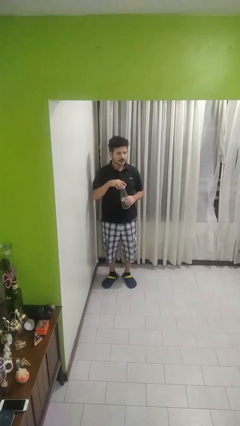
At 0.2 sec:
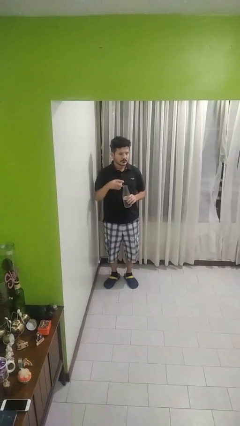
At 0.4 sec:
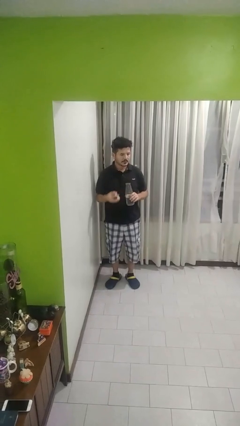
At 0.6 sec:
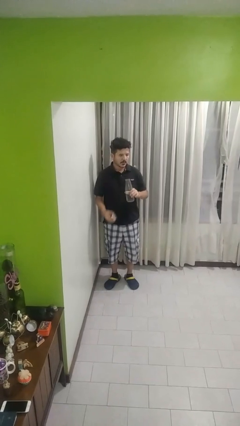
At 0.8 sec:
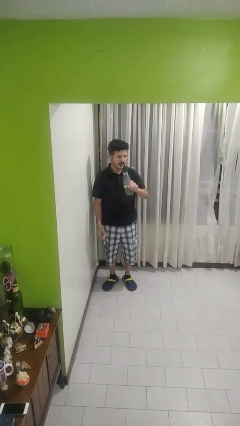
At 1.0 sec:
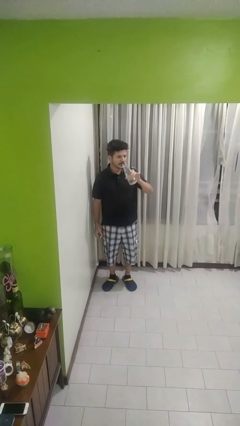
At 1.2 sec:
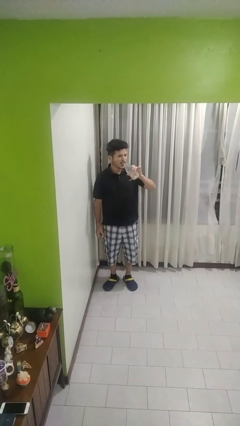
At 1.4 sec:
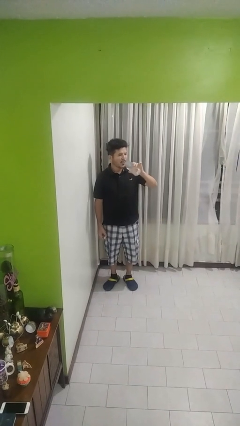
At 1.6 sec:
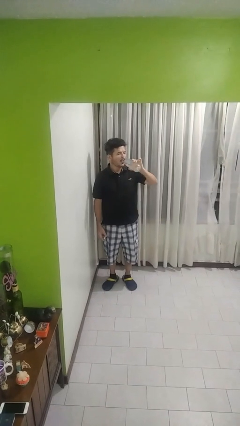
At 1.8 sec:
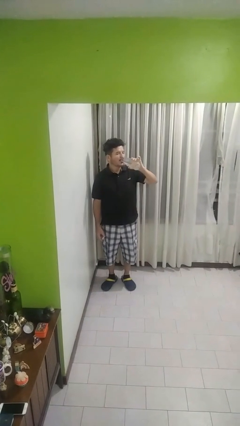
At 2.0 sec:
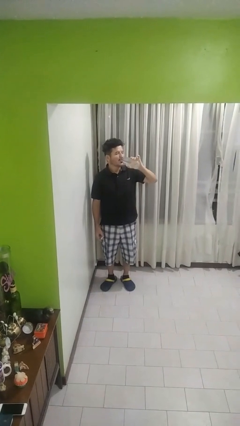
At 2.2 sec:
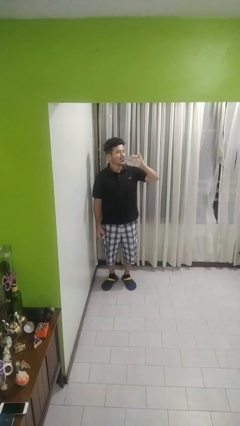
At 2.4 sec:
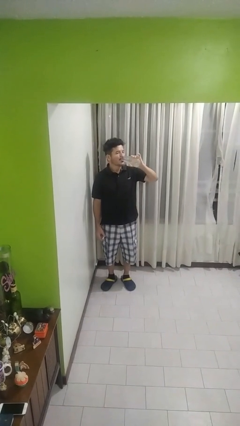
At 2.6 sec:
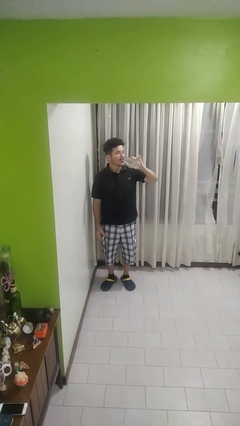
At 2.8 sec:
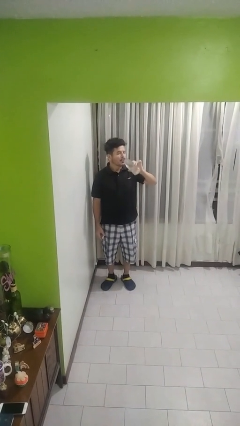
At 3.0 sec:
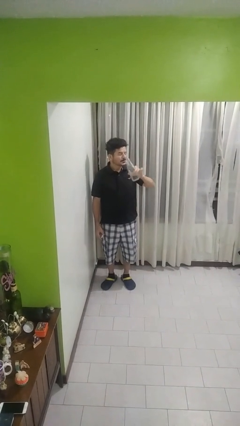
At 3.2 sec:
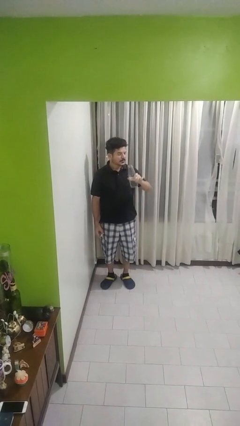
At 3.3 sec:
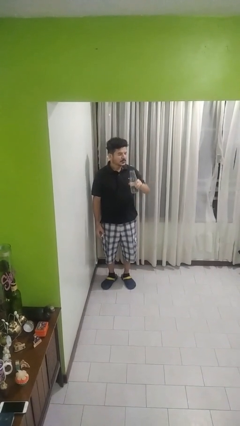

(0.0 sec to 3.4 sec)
person drinks from bottle

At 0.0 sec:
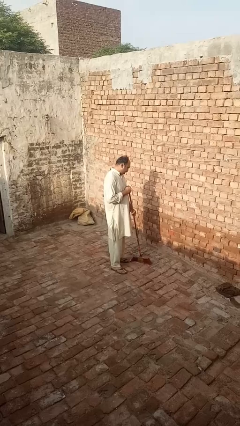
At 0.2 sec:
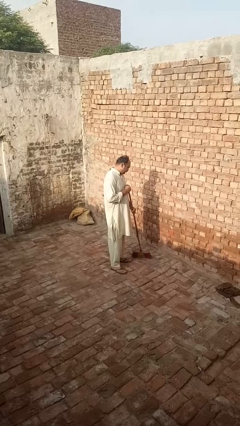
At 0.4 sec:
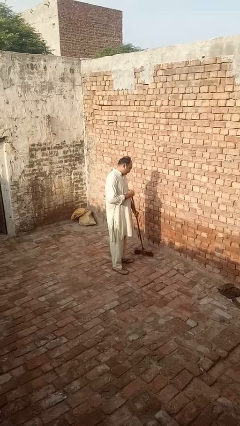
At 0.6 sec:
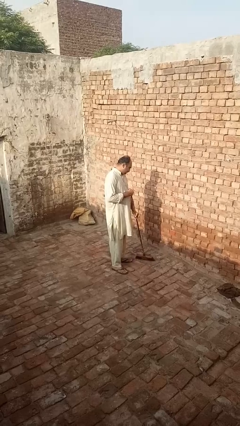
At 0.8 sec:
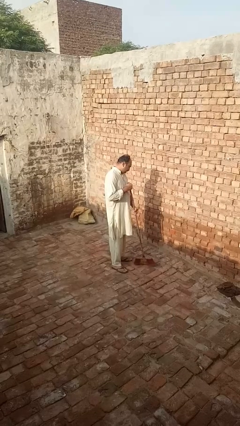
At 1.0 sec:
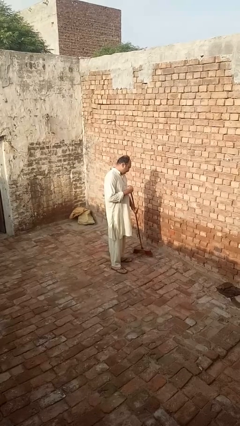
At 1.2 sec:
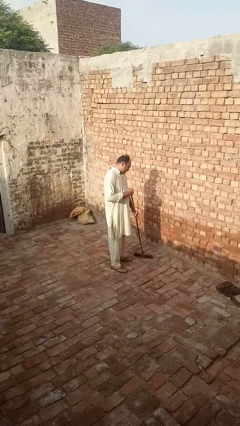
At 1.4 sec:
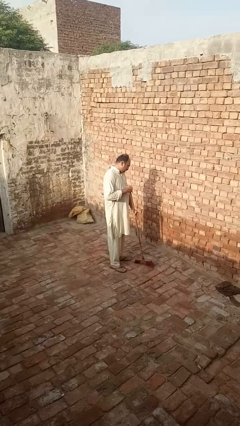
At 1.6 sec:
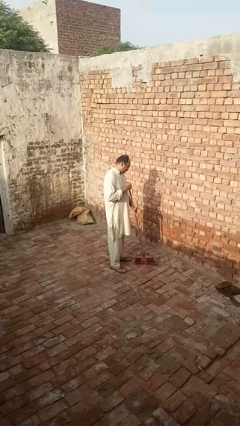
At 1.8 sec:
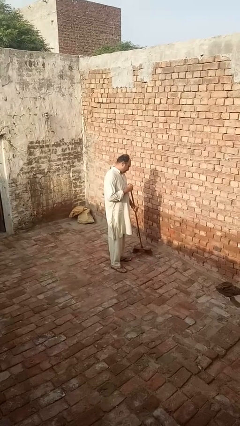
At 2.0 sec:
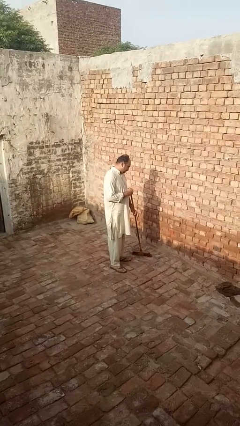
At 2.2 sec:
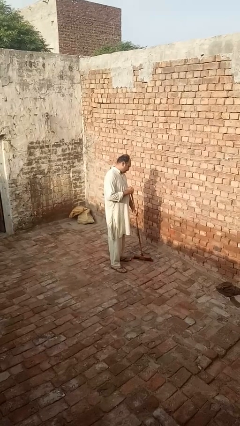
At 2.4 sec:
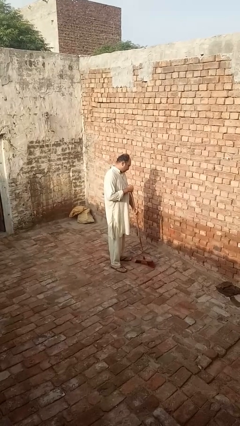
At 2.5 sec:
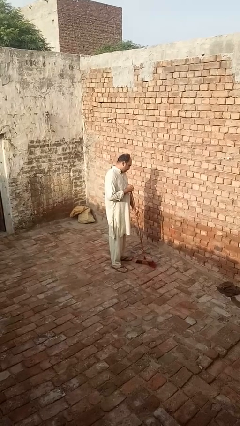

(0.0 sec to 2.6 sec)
person sweeps floor

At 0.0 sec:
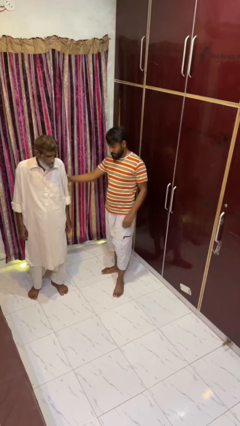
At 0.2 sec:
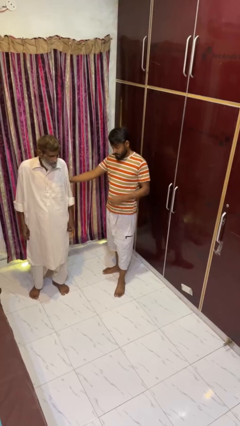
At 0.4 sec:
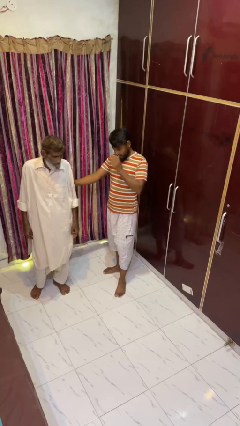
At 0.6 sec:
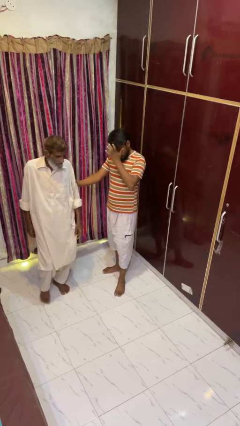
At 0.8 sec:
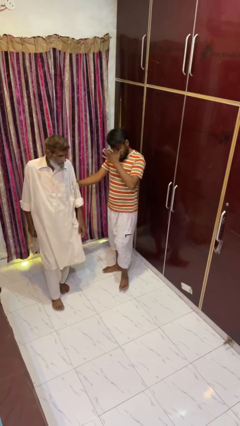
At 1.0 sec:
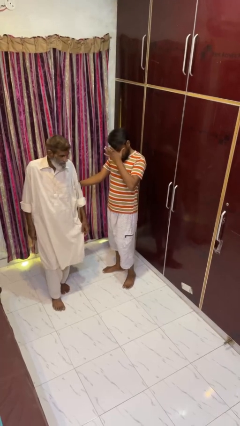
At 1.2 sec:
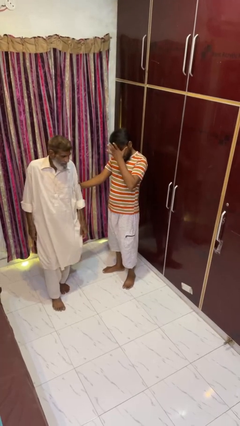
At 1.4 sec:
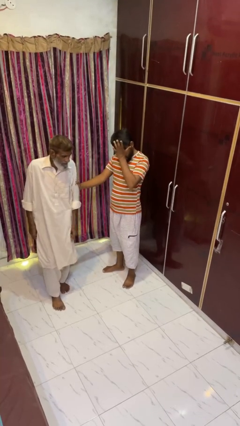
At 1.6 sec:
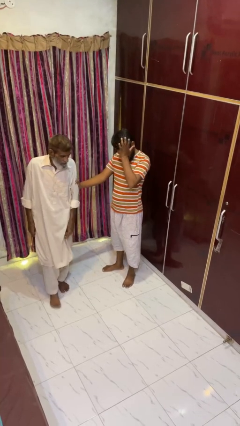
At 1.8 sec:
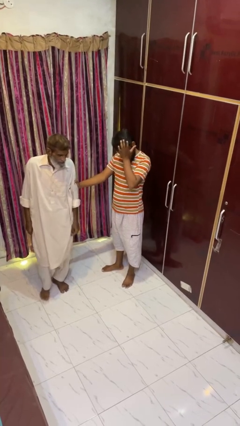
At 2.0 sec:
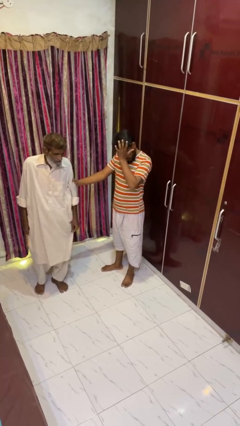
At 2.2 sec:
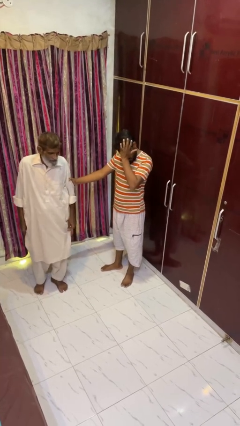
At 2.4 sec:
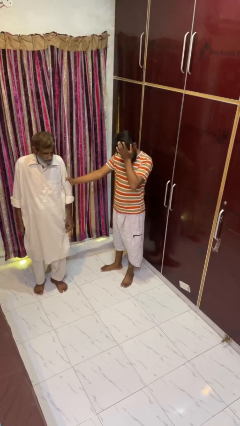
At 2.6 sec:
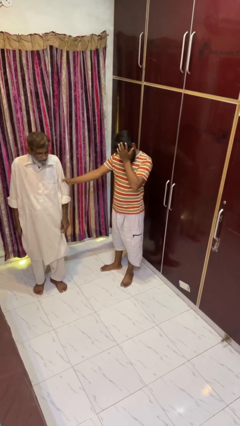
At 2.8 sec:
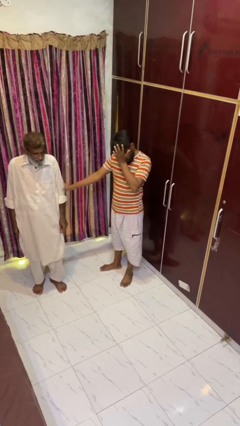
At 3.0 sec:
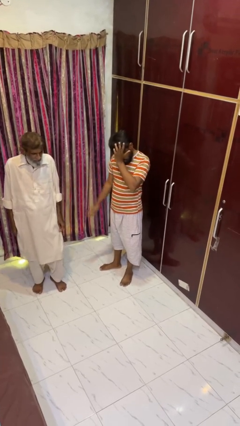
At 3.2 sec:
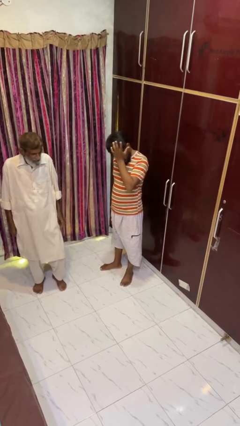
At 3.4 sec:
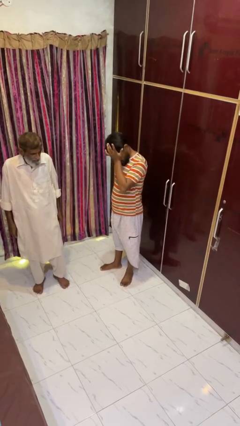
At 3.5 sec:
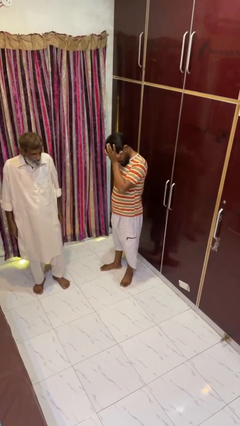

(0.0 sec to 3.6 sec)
person grabs person by bicep

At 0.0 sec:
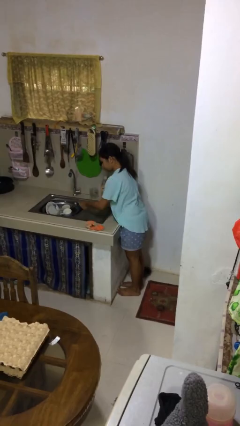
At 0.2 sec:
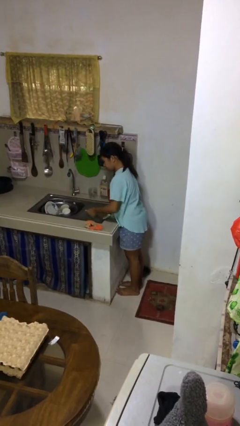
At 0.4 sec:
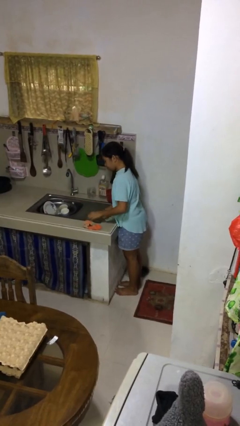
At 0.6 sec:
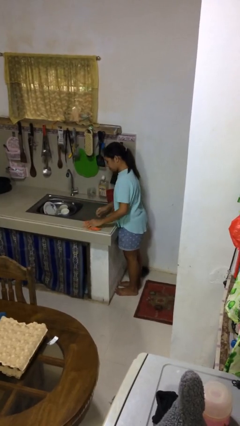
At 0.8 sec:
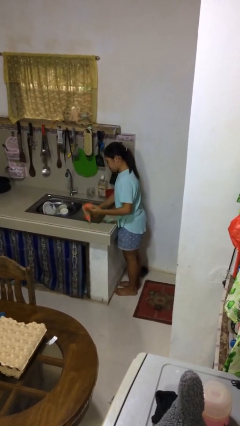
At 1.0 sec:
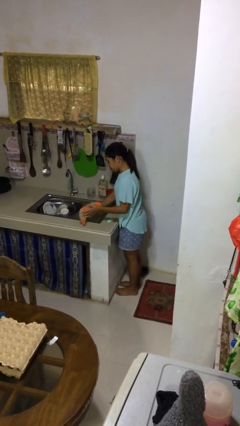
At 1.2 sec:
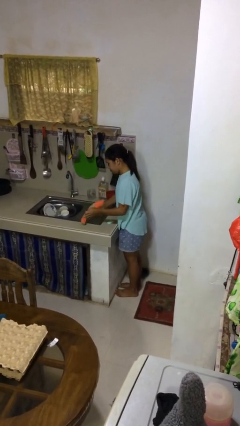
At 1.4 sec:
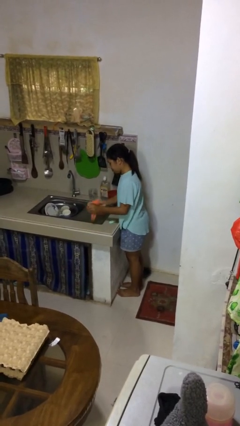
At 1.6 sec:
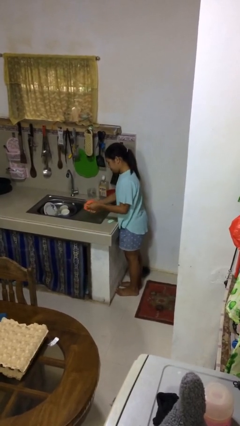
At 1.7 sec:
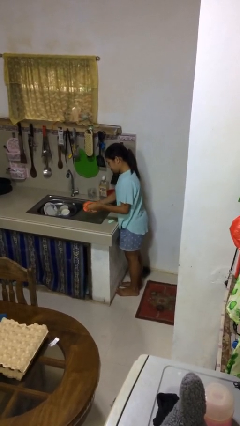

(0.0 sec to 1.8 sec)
person dries hands with towel

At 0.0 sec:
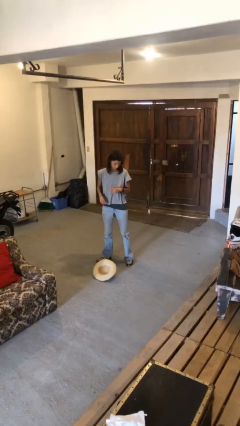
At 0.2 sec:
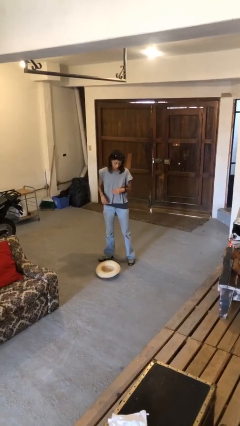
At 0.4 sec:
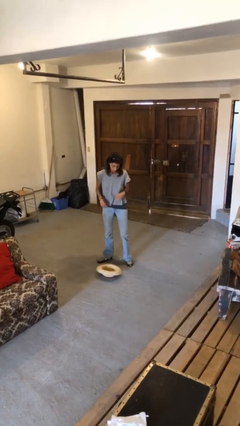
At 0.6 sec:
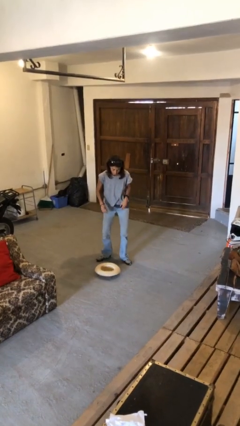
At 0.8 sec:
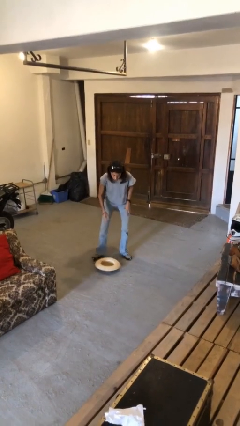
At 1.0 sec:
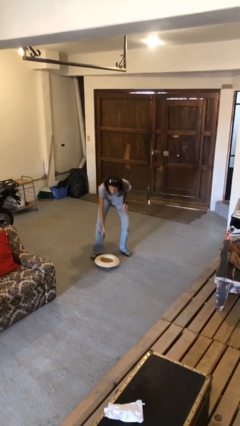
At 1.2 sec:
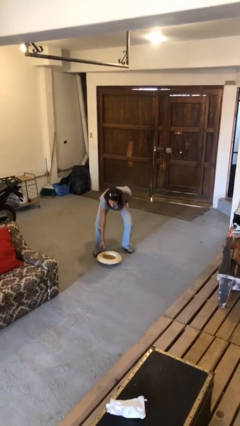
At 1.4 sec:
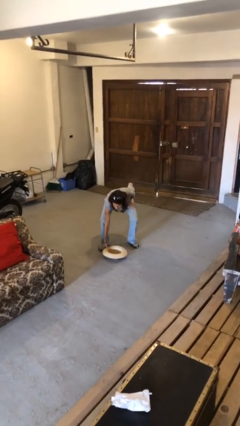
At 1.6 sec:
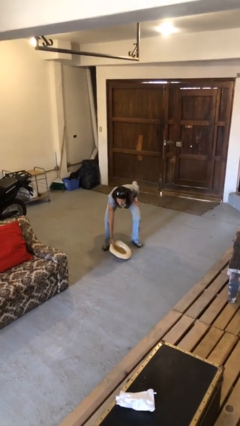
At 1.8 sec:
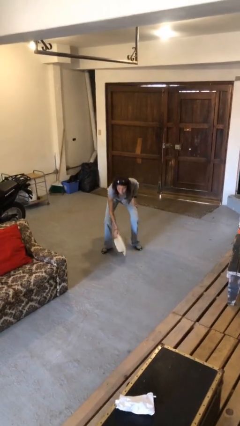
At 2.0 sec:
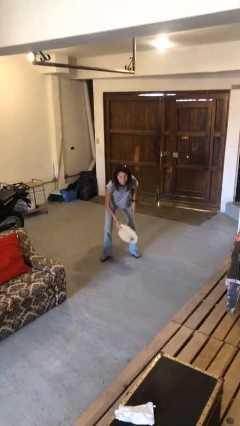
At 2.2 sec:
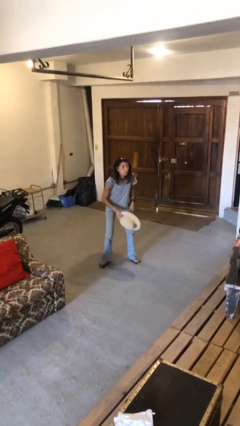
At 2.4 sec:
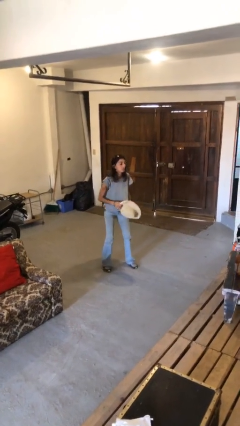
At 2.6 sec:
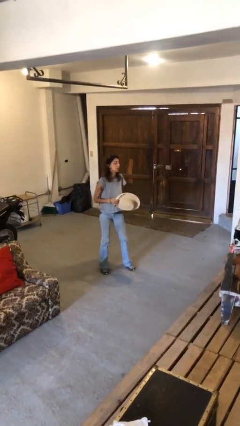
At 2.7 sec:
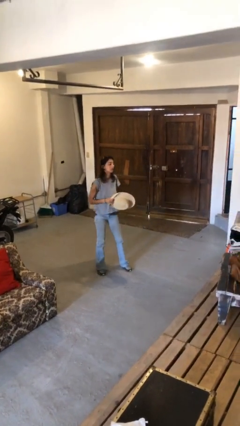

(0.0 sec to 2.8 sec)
person picks up object from floor

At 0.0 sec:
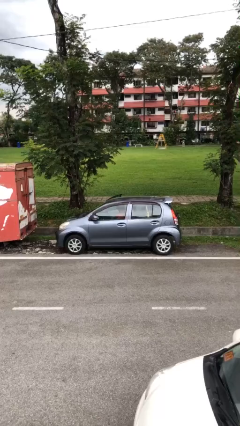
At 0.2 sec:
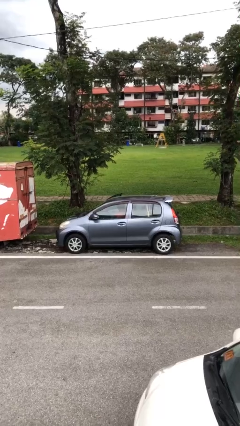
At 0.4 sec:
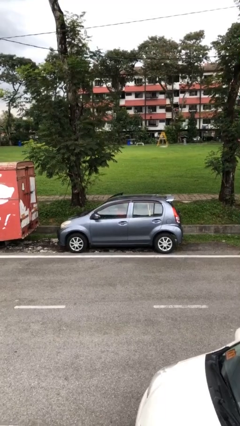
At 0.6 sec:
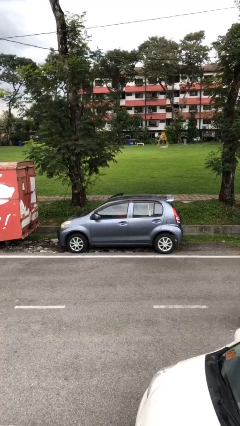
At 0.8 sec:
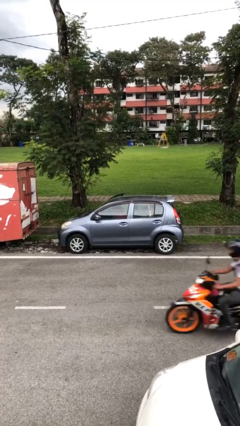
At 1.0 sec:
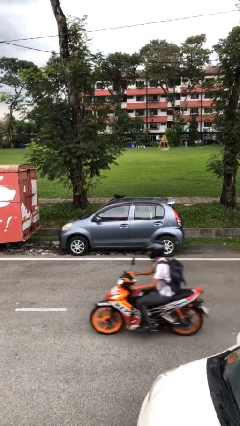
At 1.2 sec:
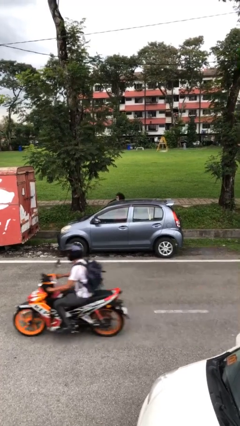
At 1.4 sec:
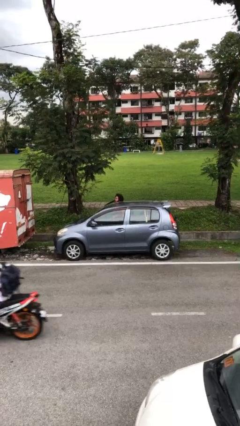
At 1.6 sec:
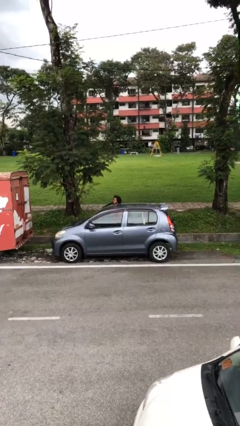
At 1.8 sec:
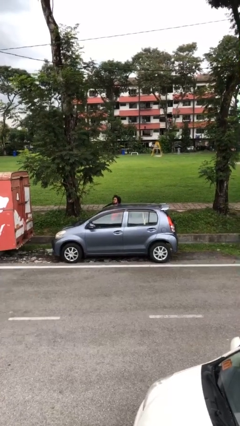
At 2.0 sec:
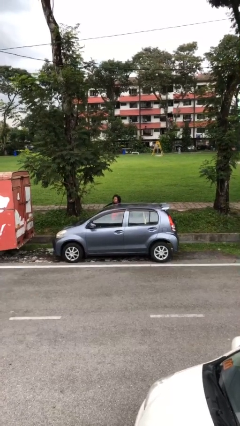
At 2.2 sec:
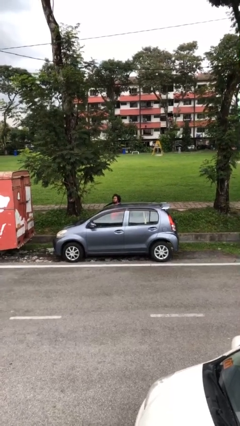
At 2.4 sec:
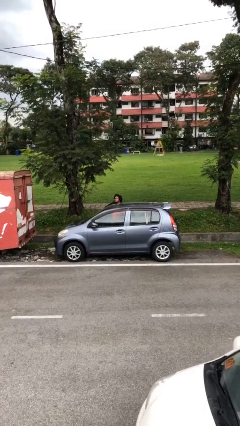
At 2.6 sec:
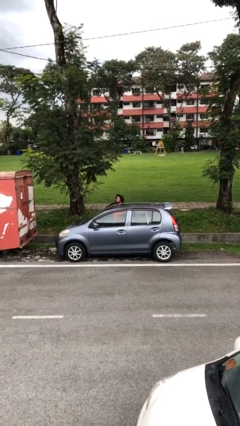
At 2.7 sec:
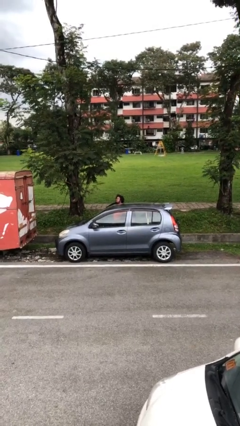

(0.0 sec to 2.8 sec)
person exits car
